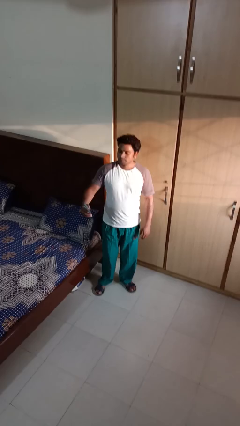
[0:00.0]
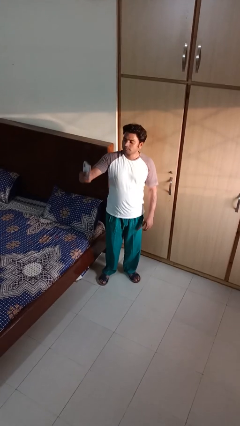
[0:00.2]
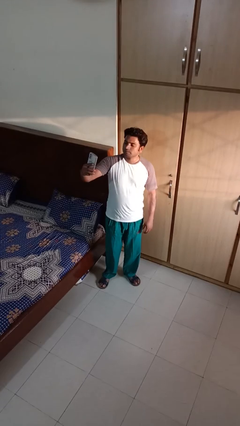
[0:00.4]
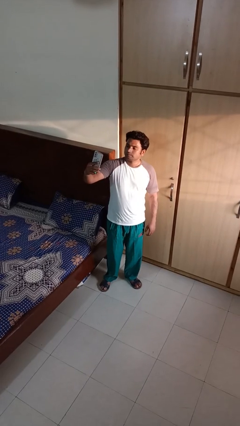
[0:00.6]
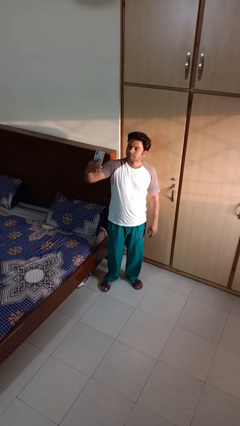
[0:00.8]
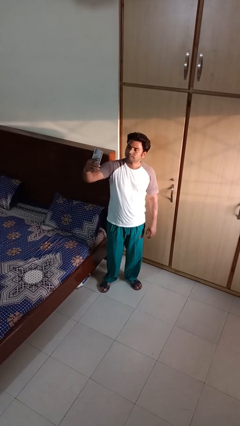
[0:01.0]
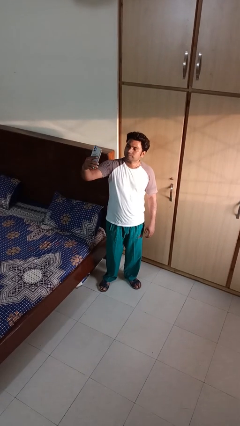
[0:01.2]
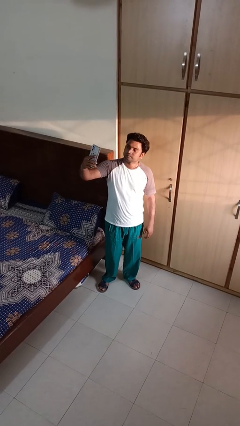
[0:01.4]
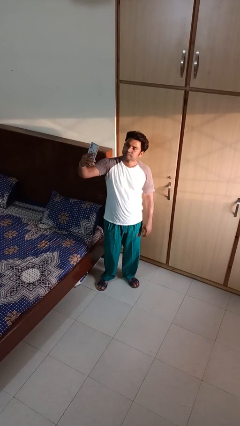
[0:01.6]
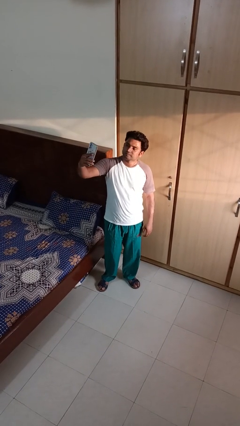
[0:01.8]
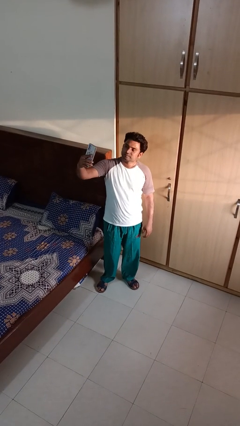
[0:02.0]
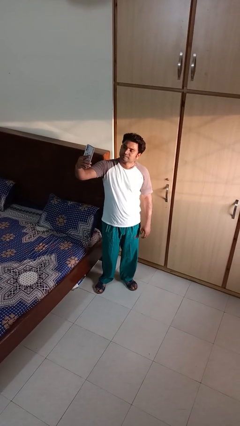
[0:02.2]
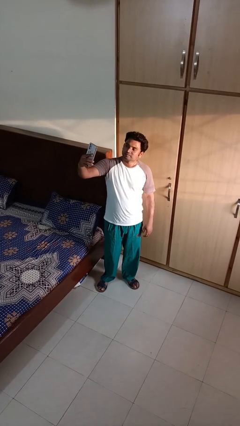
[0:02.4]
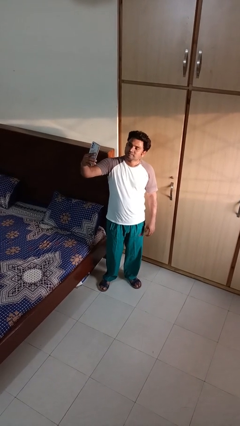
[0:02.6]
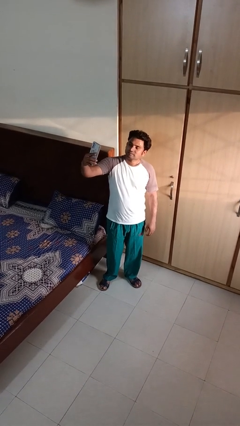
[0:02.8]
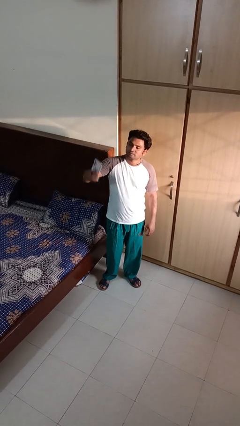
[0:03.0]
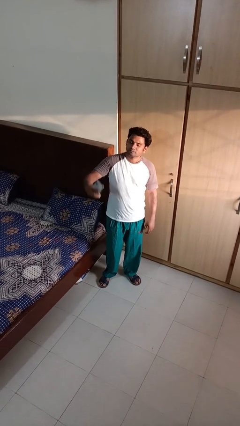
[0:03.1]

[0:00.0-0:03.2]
person takes selfie

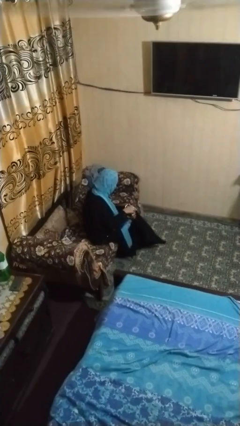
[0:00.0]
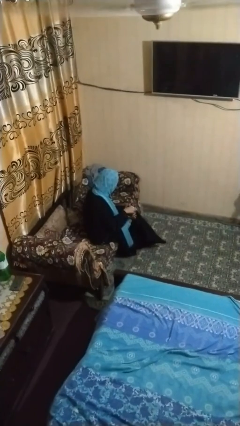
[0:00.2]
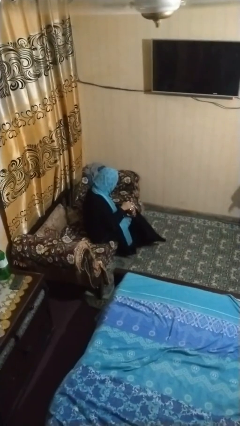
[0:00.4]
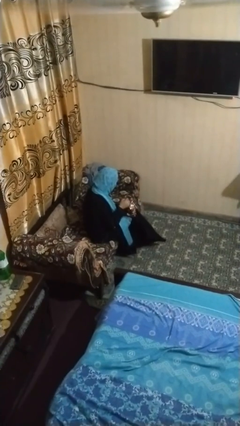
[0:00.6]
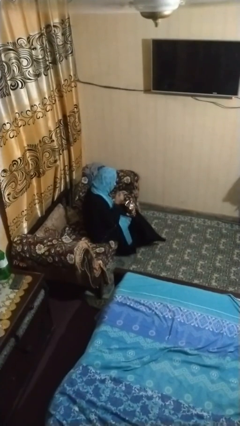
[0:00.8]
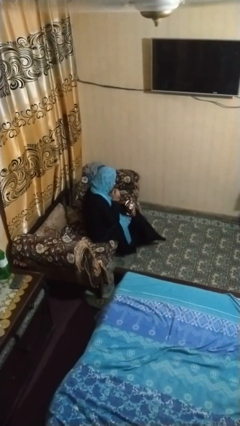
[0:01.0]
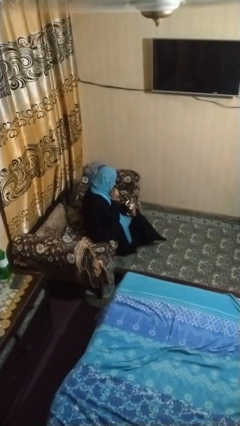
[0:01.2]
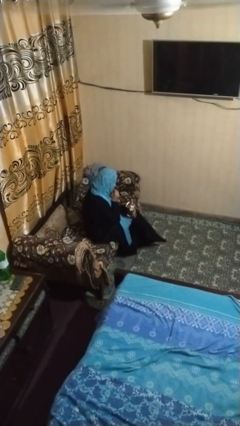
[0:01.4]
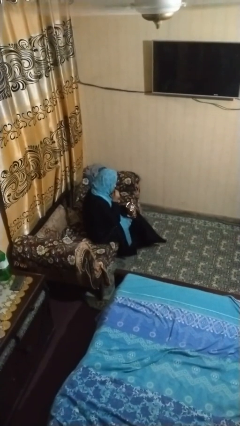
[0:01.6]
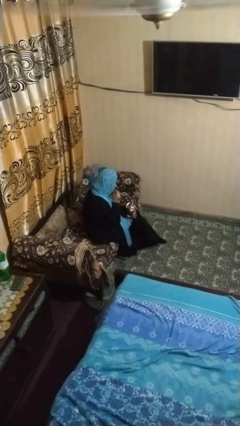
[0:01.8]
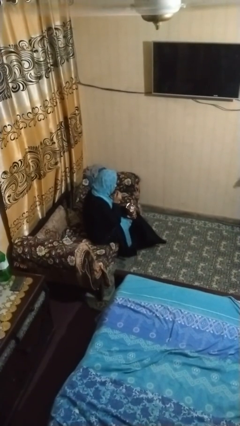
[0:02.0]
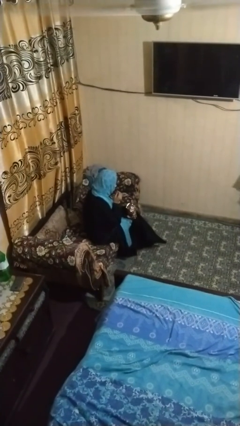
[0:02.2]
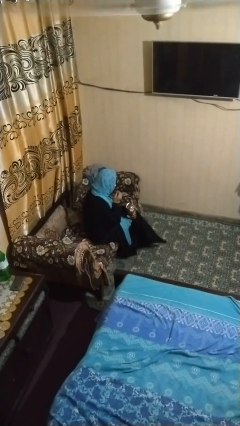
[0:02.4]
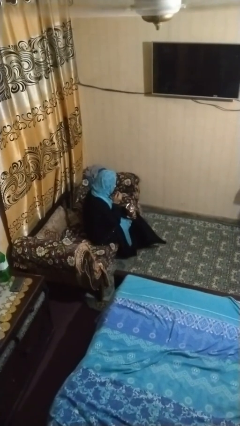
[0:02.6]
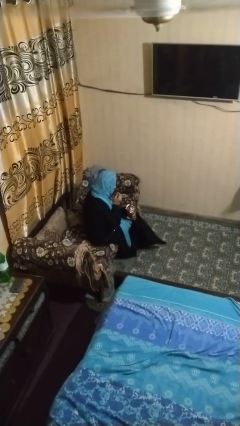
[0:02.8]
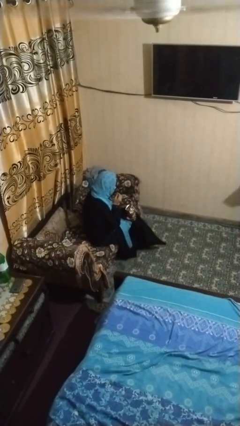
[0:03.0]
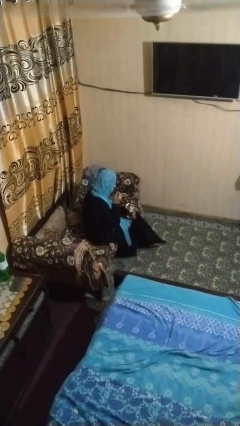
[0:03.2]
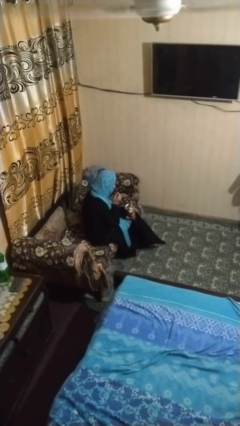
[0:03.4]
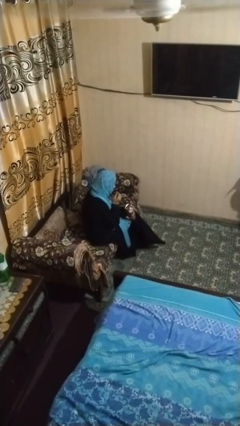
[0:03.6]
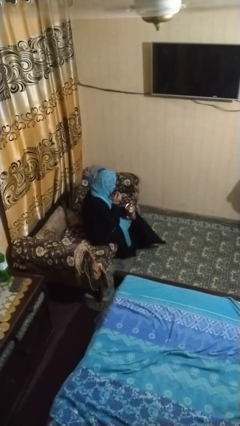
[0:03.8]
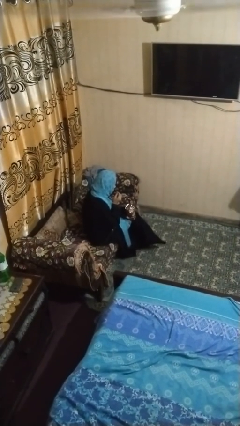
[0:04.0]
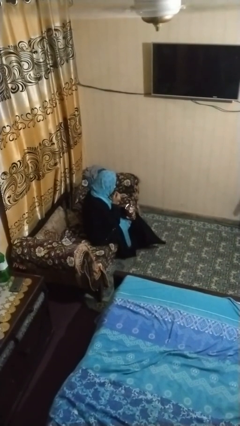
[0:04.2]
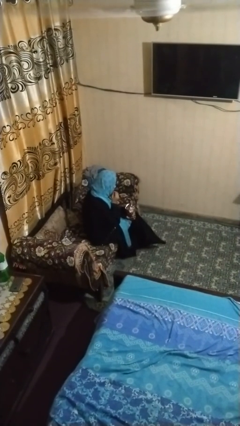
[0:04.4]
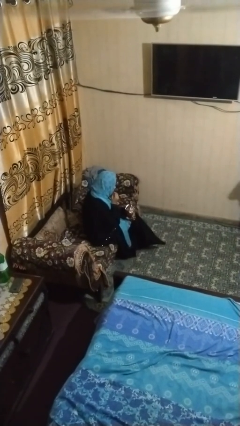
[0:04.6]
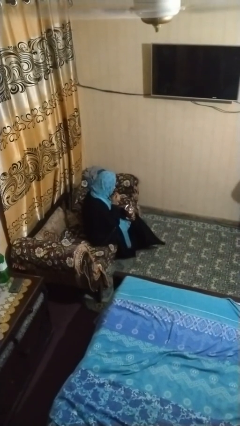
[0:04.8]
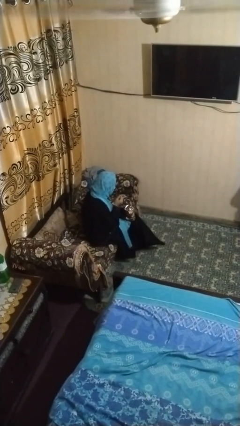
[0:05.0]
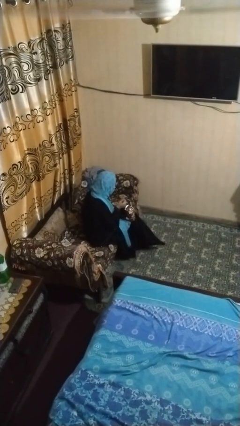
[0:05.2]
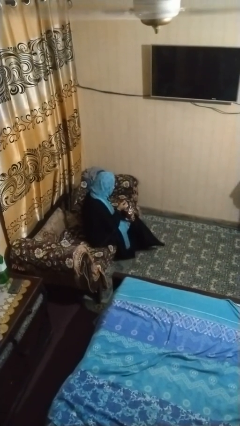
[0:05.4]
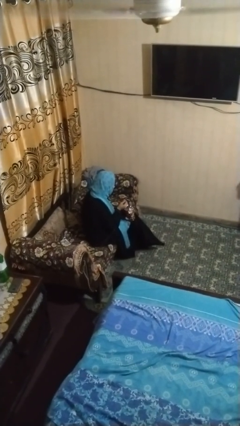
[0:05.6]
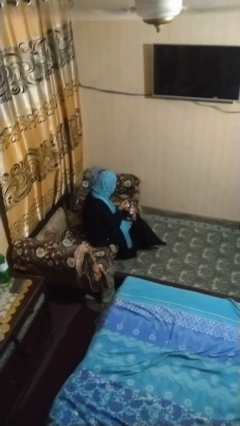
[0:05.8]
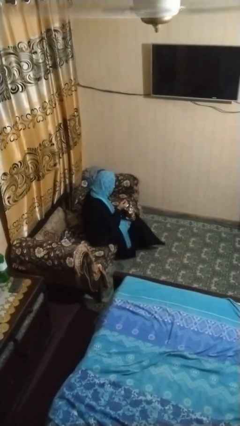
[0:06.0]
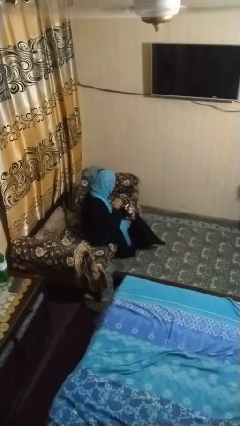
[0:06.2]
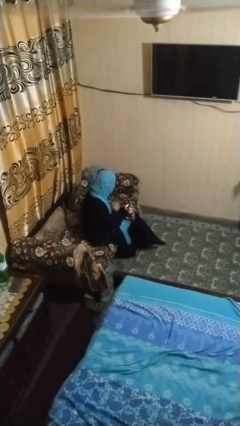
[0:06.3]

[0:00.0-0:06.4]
person eats snack from bag

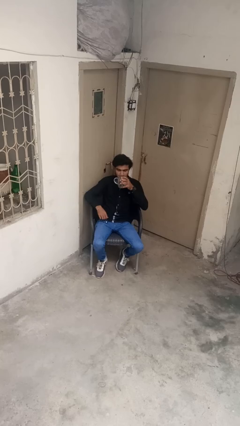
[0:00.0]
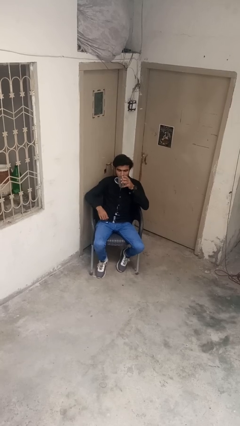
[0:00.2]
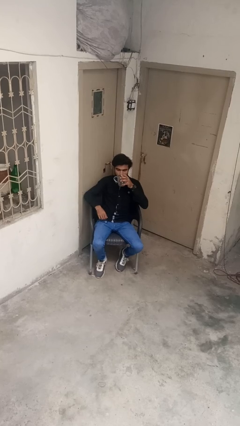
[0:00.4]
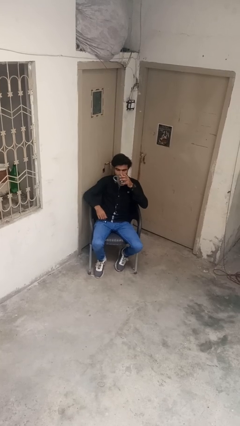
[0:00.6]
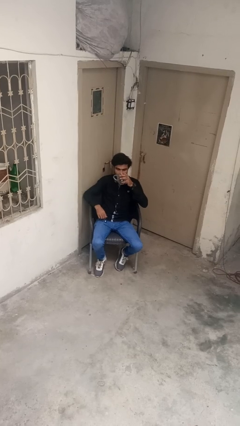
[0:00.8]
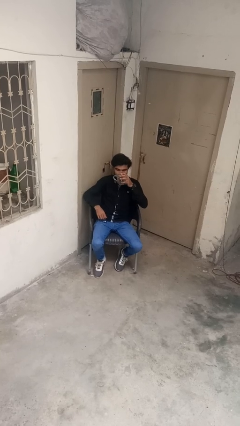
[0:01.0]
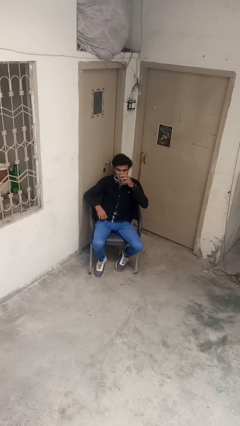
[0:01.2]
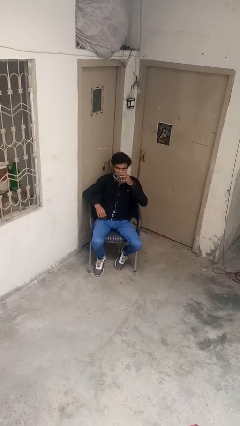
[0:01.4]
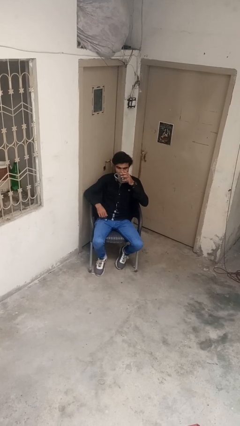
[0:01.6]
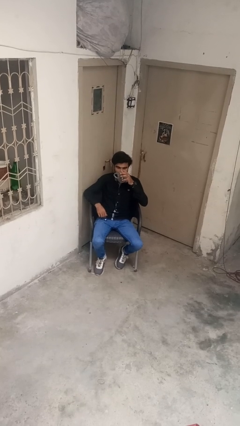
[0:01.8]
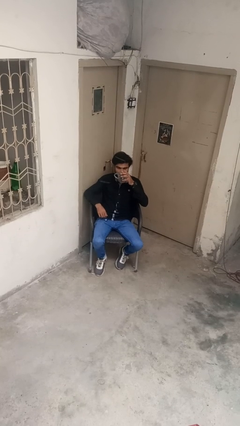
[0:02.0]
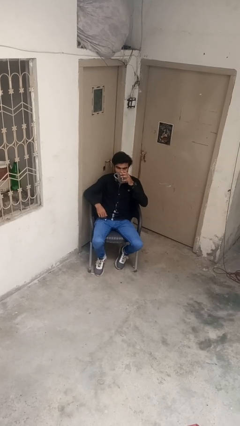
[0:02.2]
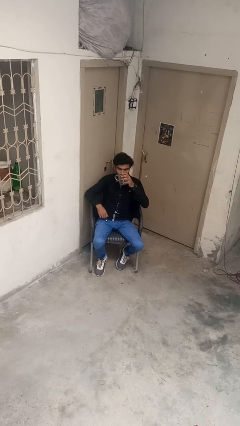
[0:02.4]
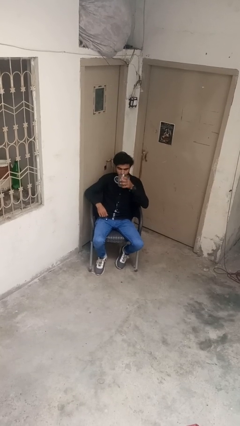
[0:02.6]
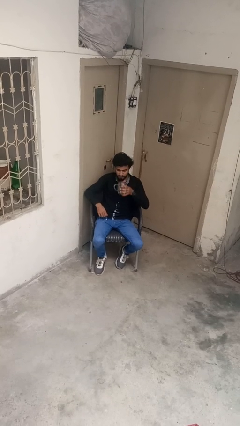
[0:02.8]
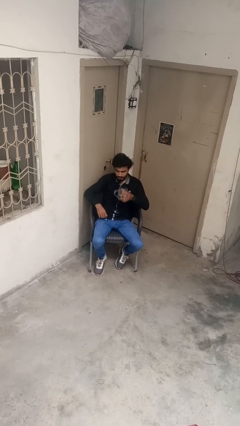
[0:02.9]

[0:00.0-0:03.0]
person drinks from cup

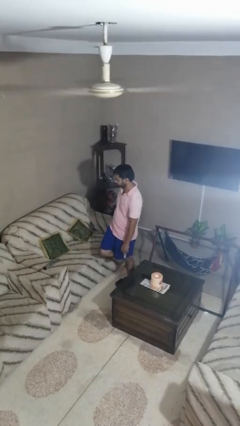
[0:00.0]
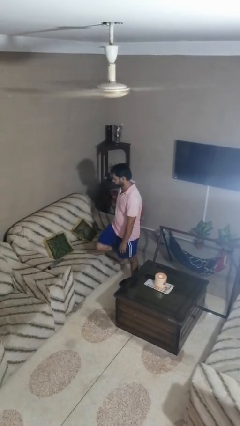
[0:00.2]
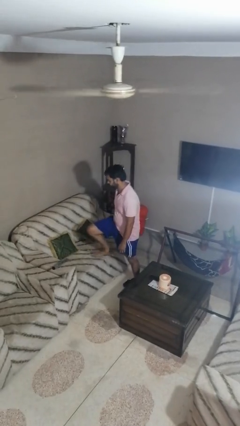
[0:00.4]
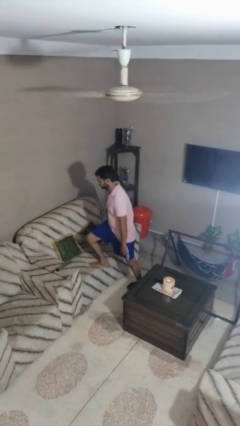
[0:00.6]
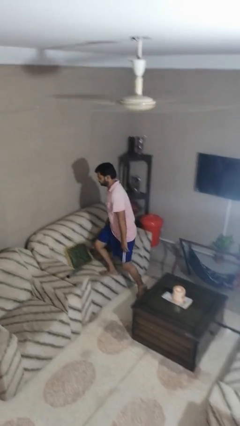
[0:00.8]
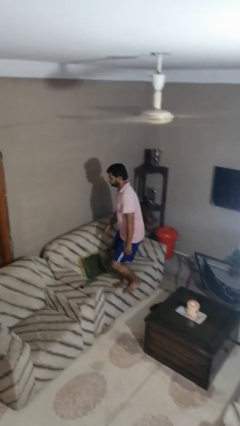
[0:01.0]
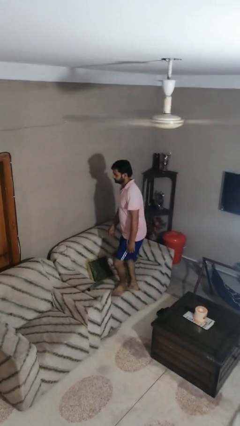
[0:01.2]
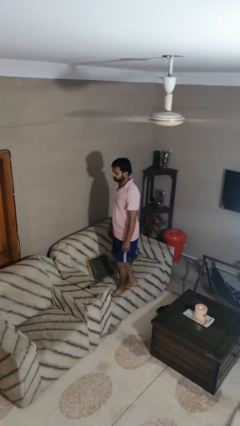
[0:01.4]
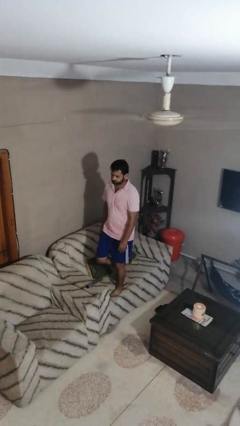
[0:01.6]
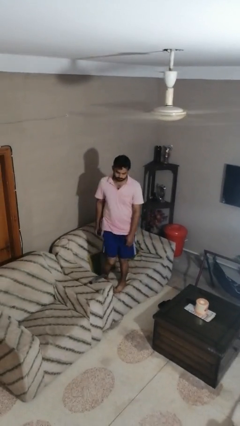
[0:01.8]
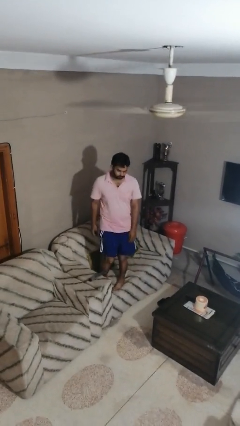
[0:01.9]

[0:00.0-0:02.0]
person climbs on couch

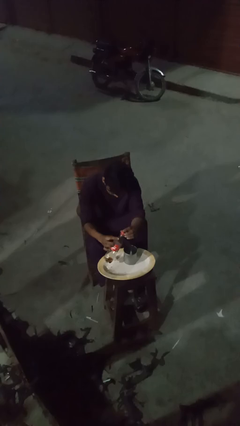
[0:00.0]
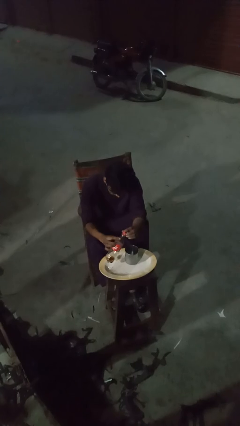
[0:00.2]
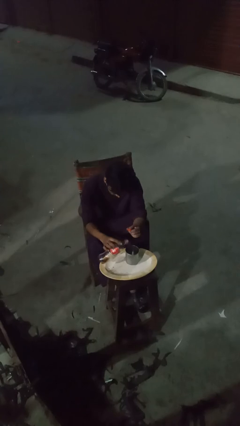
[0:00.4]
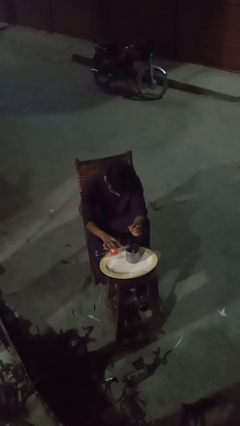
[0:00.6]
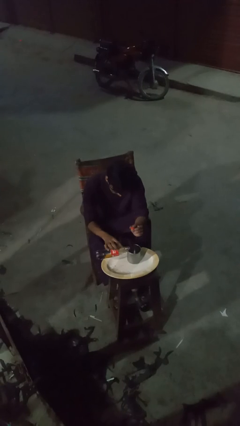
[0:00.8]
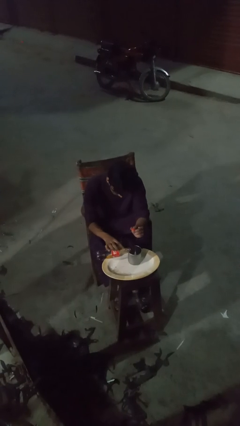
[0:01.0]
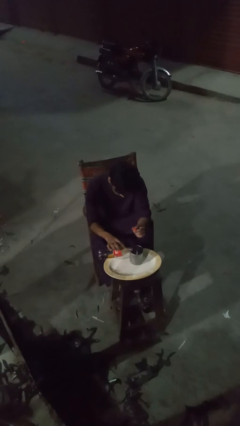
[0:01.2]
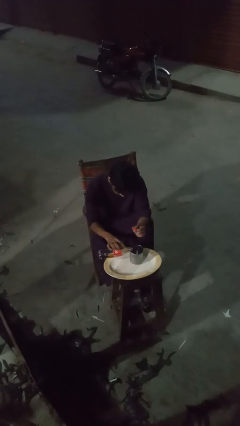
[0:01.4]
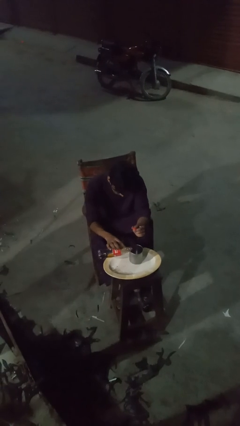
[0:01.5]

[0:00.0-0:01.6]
person pours liquid into cup

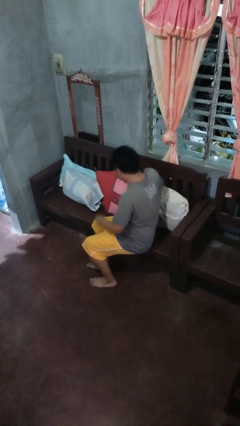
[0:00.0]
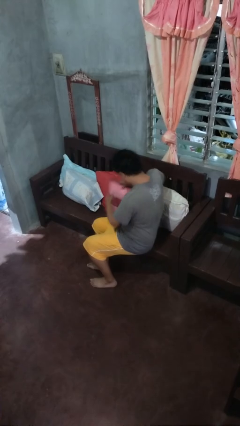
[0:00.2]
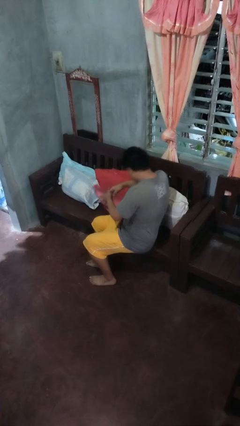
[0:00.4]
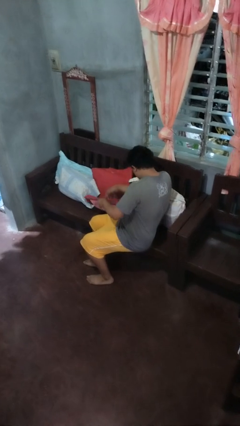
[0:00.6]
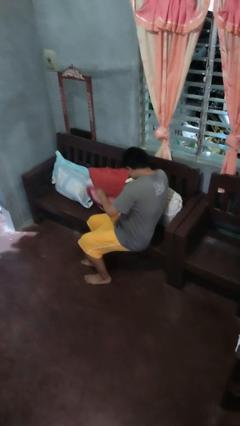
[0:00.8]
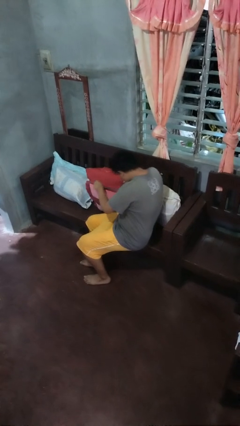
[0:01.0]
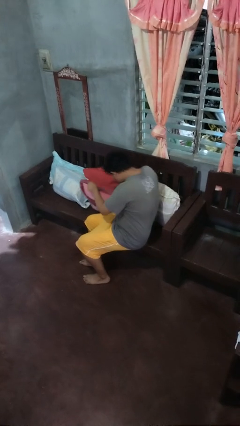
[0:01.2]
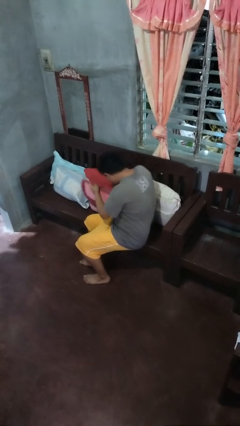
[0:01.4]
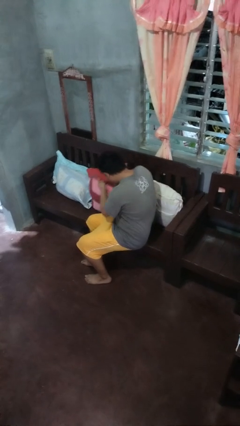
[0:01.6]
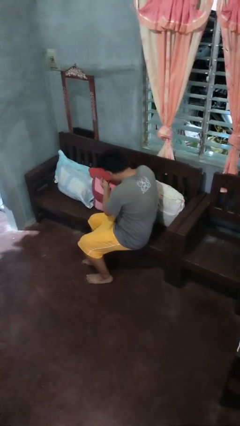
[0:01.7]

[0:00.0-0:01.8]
person searches in couch
